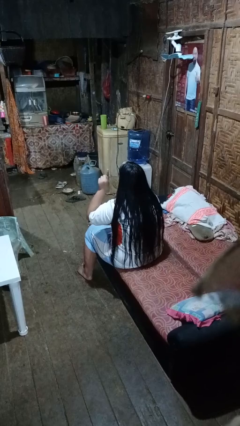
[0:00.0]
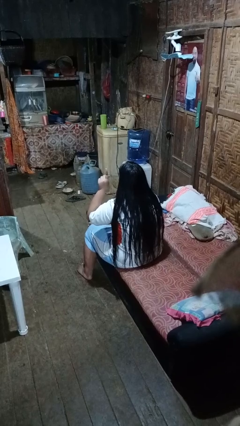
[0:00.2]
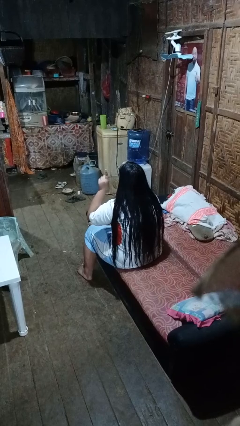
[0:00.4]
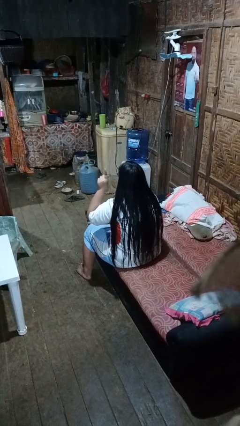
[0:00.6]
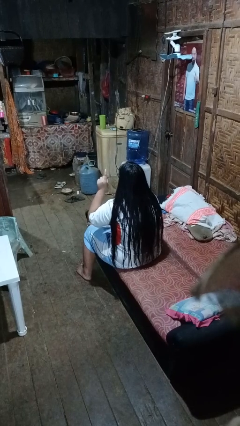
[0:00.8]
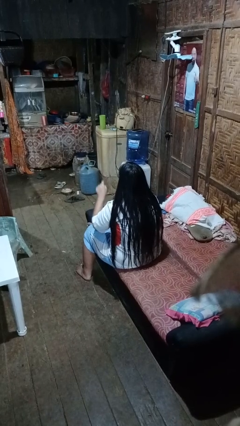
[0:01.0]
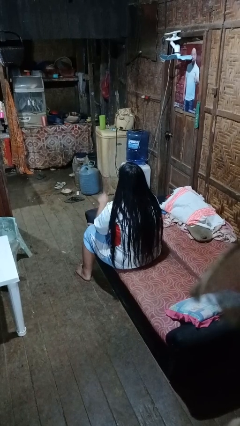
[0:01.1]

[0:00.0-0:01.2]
person gestures number one

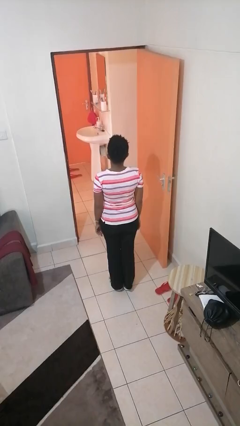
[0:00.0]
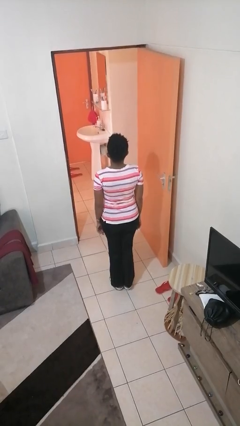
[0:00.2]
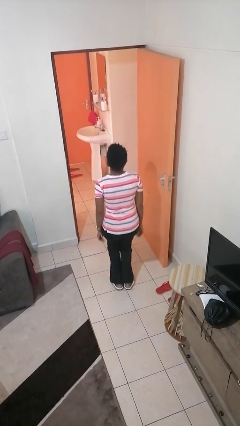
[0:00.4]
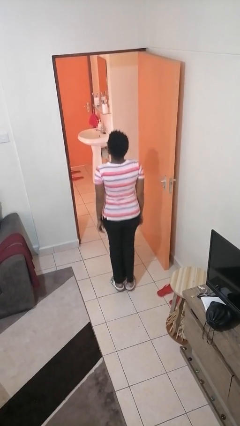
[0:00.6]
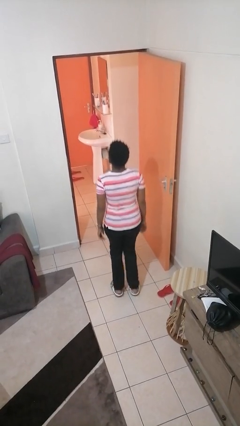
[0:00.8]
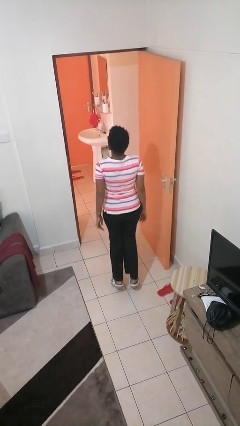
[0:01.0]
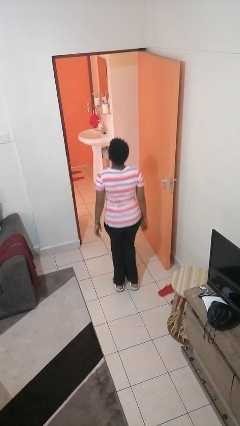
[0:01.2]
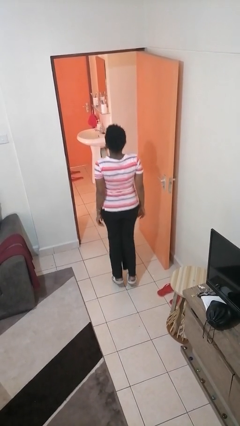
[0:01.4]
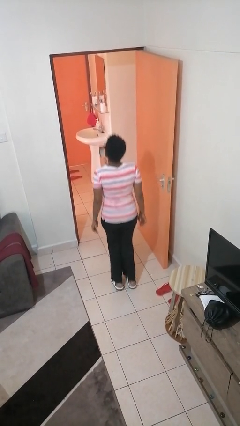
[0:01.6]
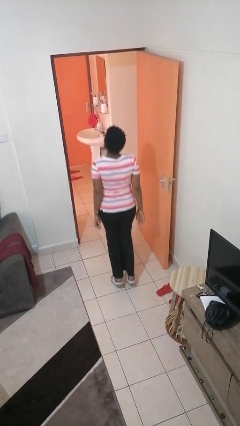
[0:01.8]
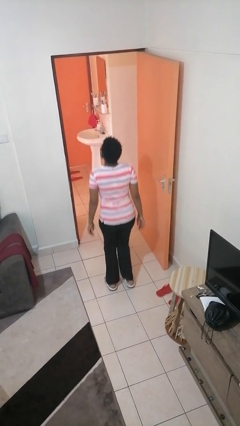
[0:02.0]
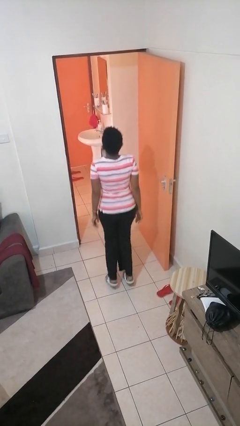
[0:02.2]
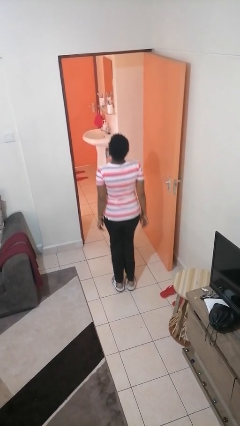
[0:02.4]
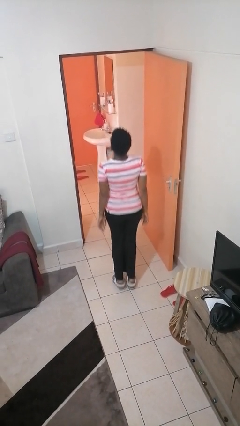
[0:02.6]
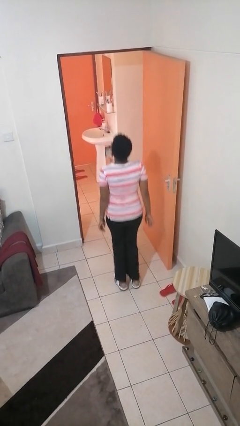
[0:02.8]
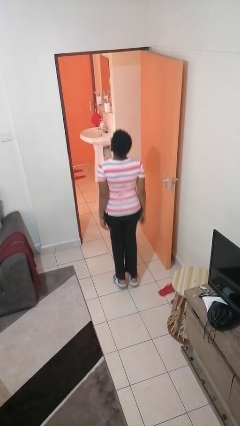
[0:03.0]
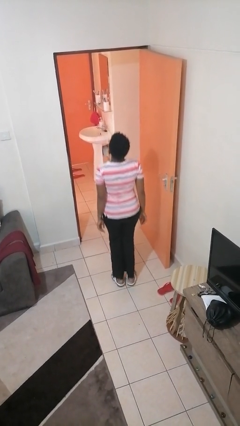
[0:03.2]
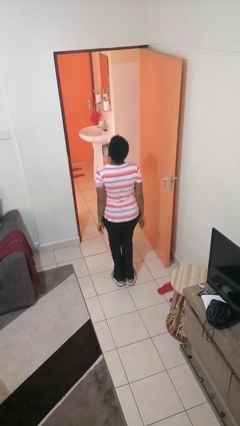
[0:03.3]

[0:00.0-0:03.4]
person jumps

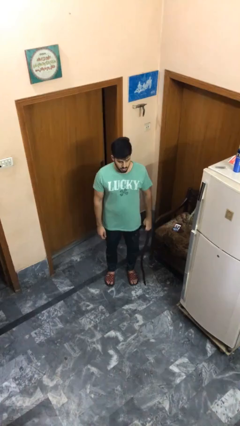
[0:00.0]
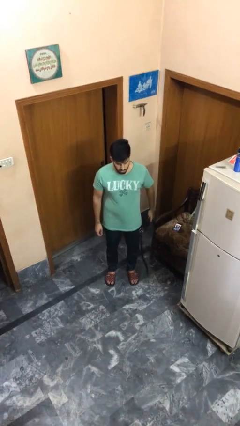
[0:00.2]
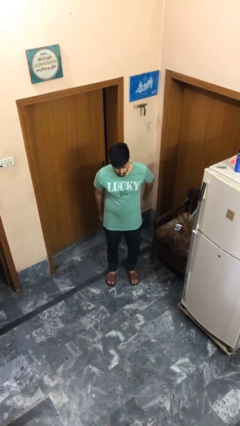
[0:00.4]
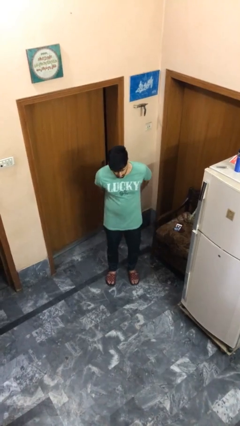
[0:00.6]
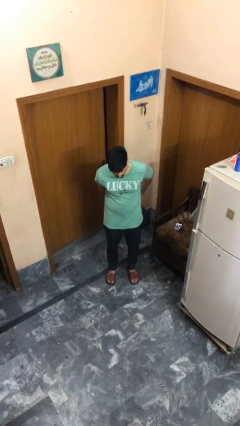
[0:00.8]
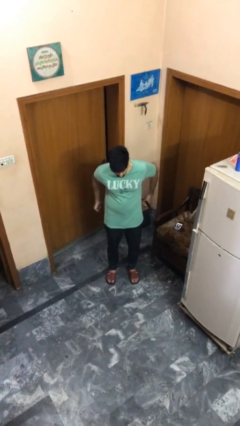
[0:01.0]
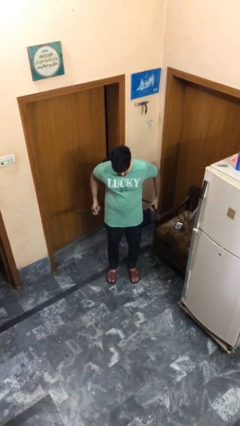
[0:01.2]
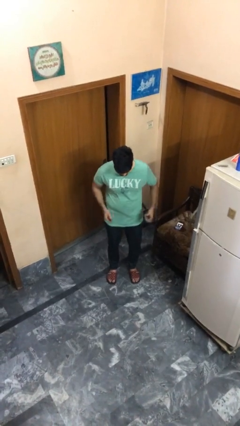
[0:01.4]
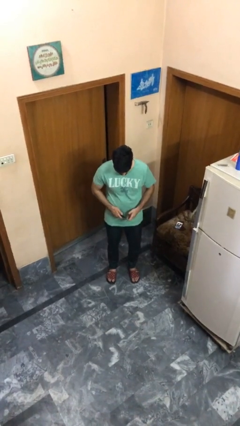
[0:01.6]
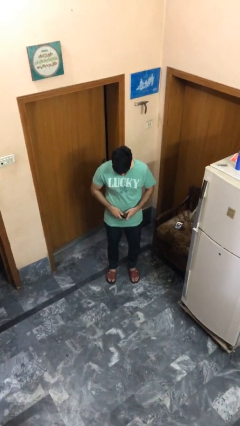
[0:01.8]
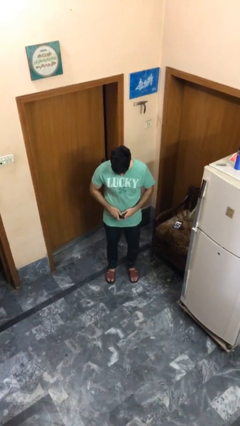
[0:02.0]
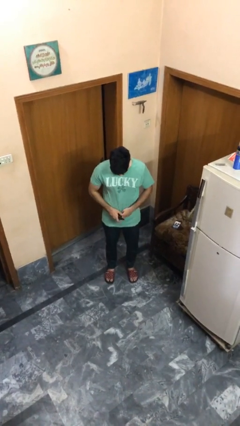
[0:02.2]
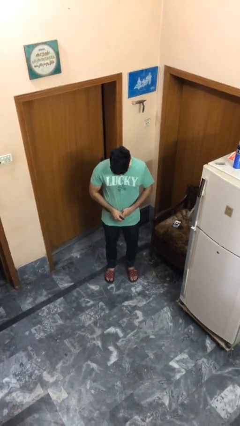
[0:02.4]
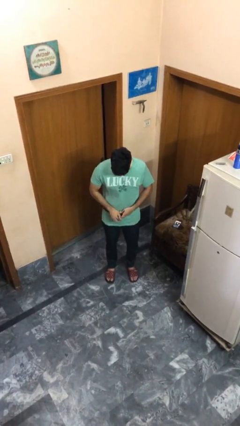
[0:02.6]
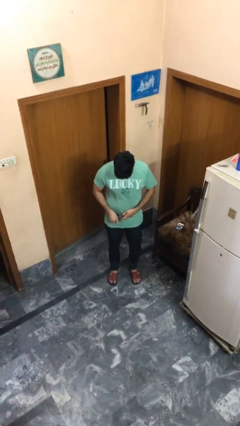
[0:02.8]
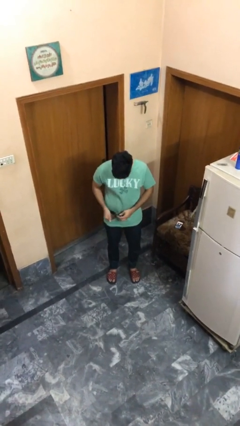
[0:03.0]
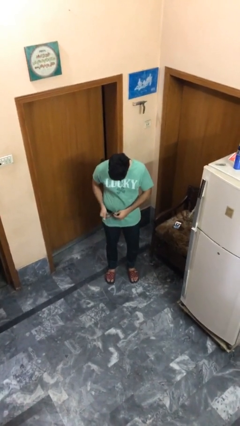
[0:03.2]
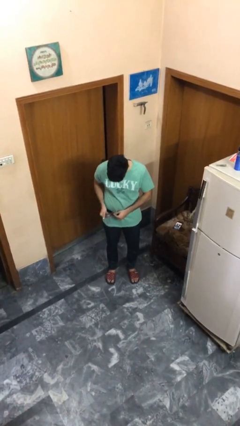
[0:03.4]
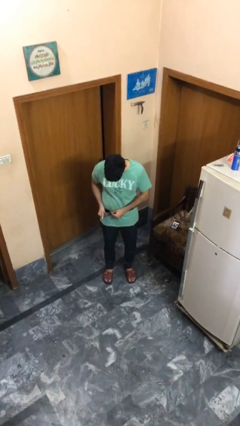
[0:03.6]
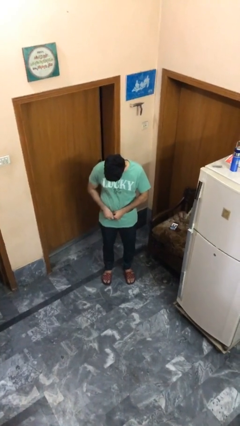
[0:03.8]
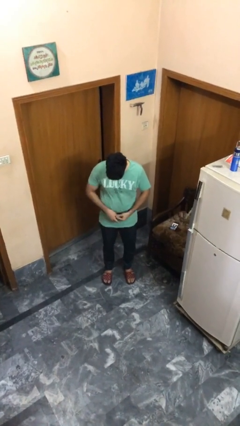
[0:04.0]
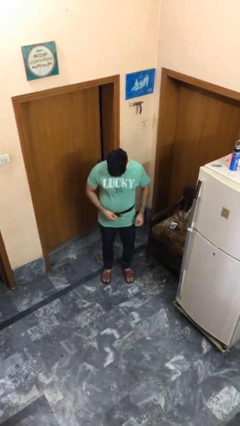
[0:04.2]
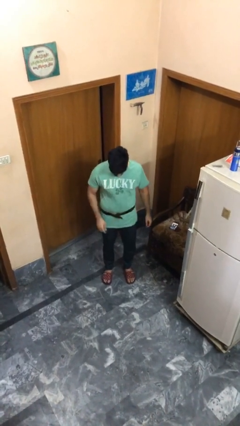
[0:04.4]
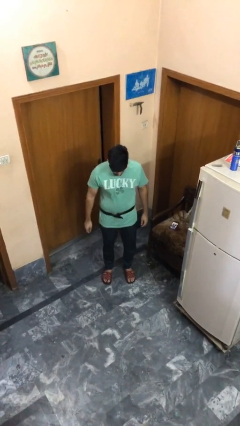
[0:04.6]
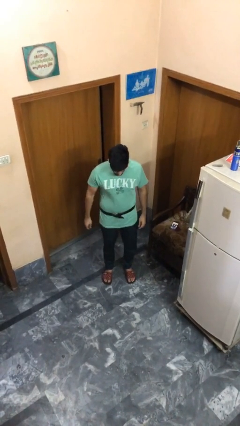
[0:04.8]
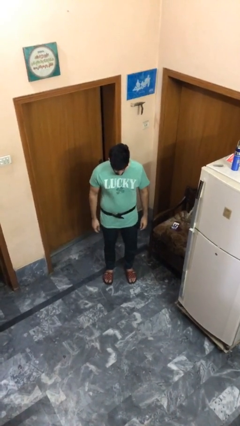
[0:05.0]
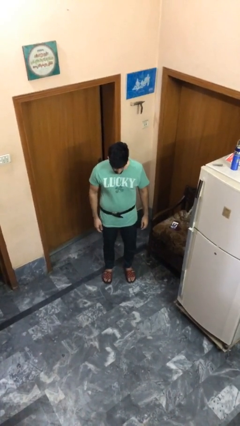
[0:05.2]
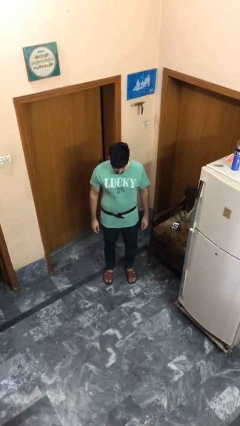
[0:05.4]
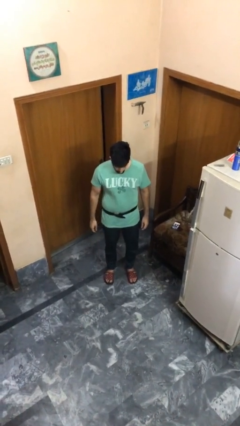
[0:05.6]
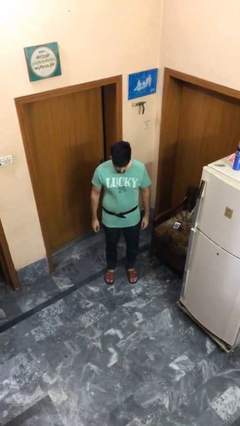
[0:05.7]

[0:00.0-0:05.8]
person puts on belt

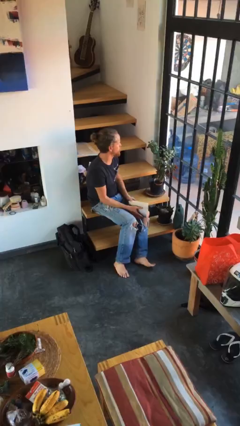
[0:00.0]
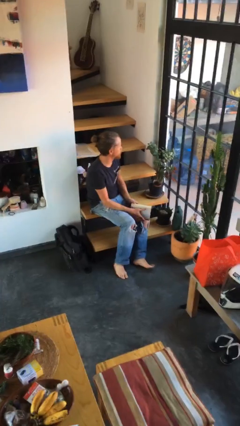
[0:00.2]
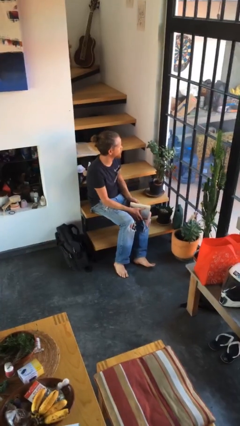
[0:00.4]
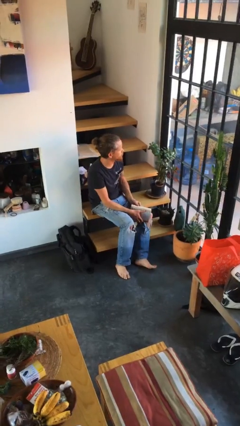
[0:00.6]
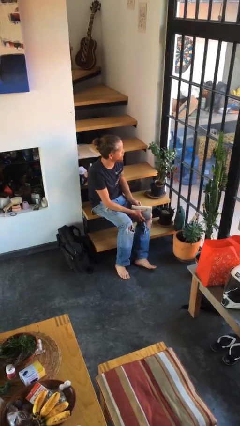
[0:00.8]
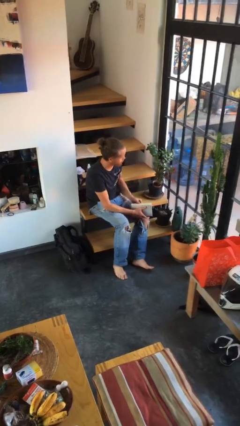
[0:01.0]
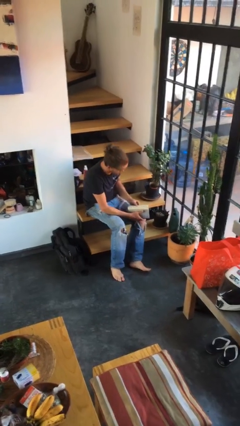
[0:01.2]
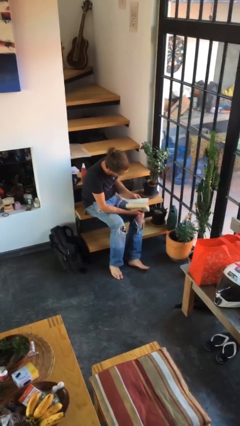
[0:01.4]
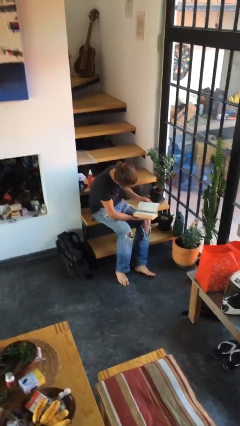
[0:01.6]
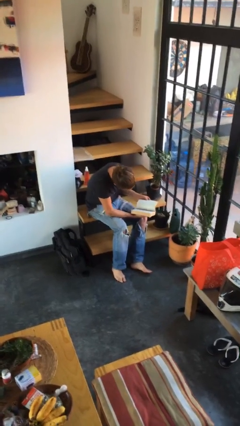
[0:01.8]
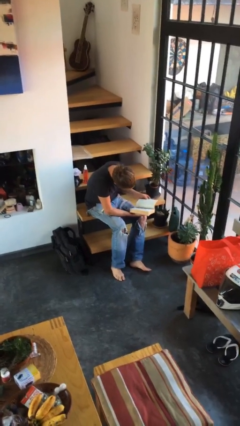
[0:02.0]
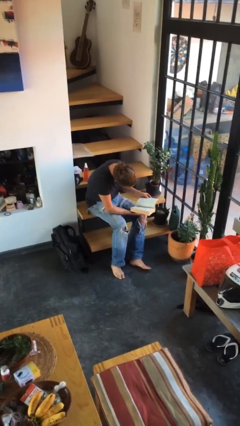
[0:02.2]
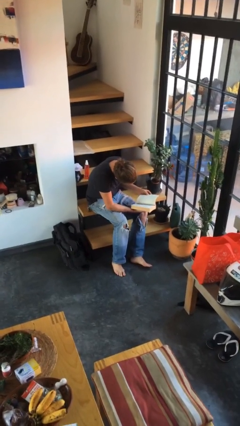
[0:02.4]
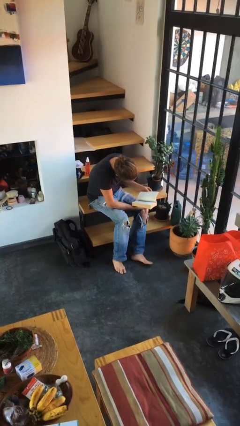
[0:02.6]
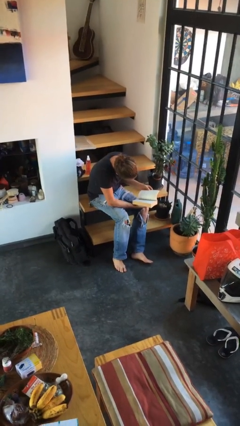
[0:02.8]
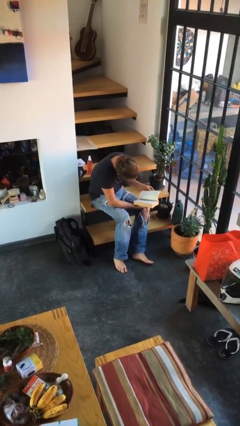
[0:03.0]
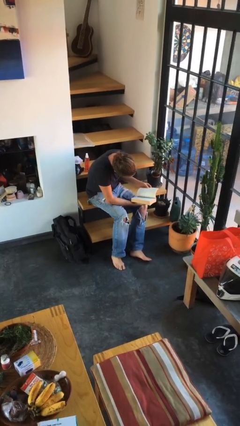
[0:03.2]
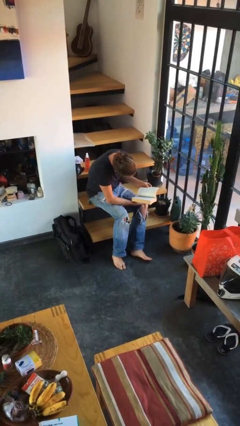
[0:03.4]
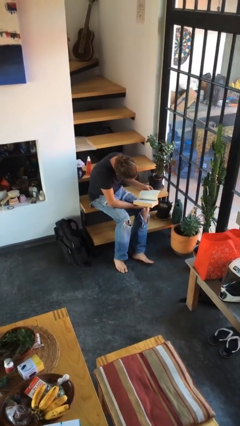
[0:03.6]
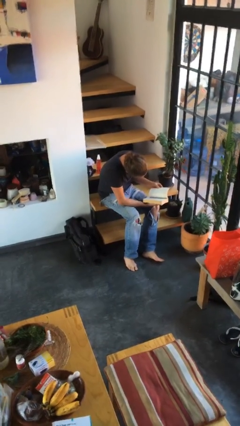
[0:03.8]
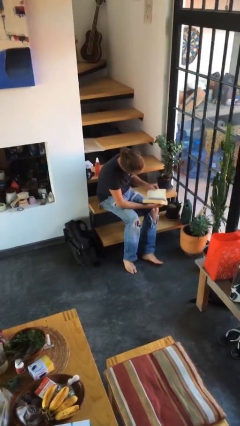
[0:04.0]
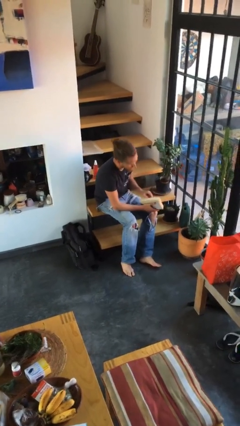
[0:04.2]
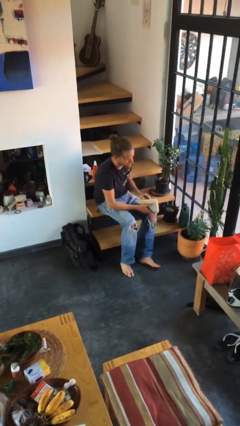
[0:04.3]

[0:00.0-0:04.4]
person reads book

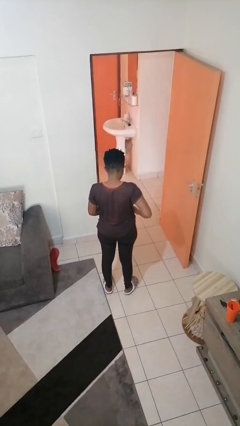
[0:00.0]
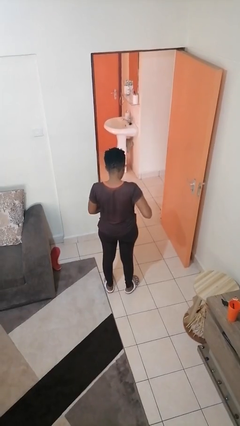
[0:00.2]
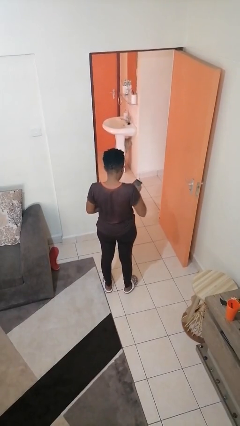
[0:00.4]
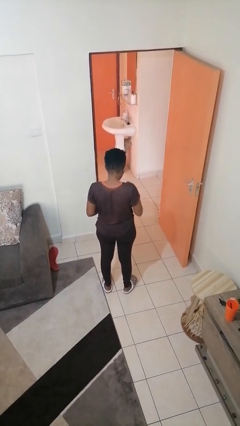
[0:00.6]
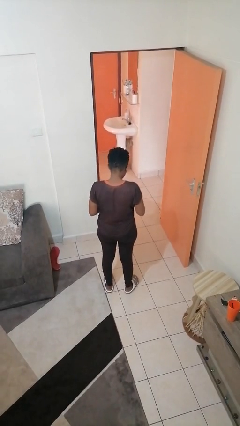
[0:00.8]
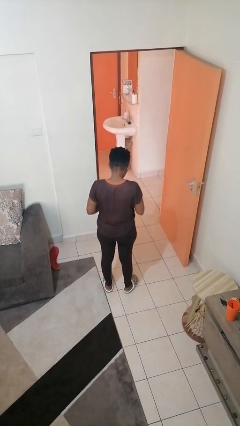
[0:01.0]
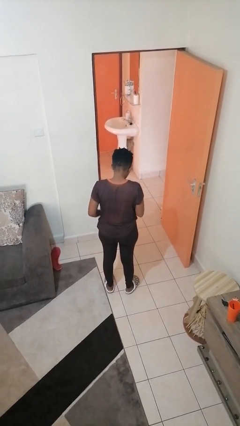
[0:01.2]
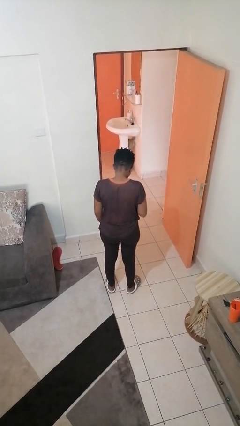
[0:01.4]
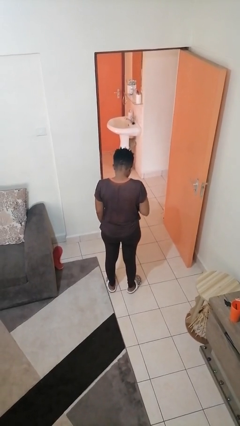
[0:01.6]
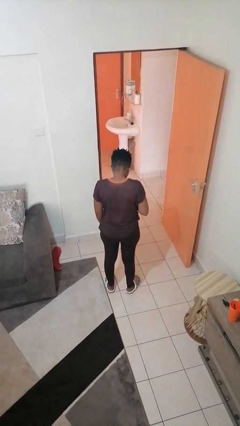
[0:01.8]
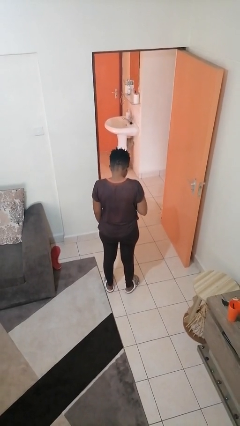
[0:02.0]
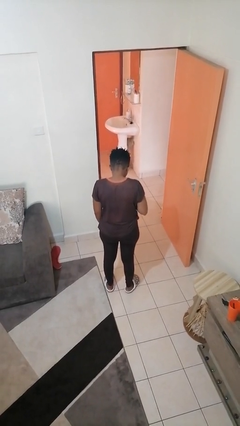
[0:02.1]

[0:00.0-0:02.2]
person takes phone from pocket
